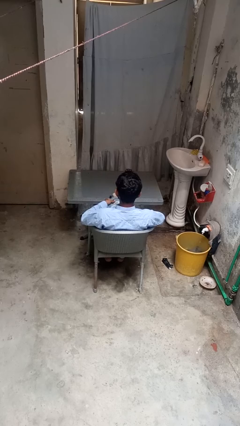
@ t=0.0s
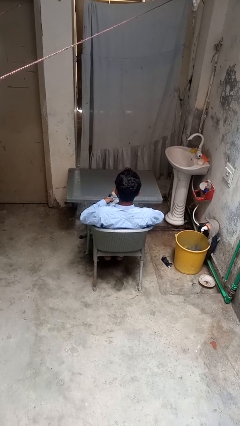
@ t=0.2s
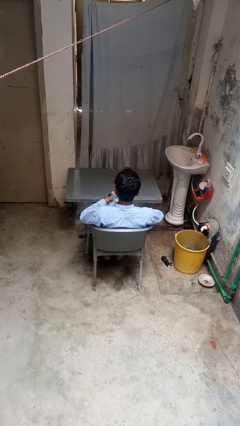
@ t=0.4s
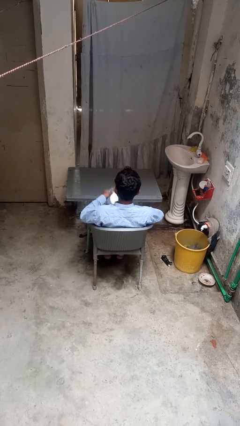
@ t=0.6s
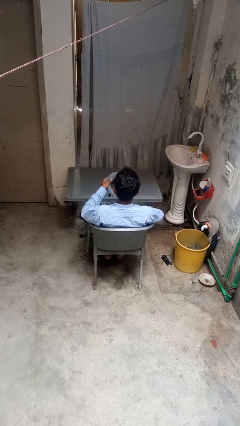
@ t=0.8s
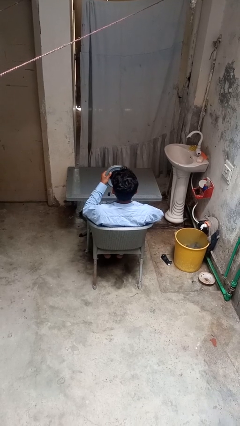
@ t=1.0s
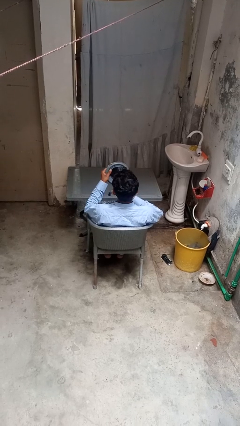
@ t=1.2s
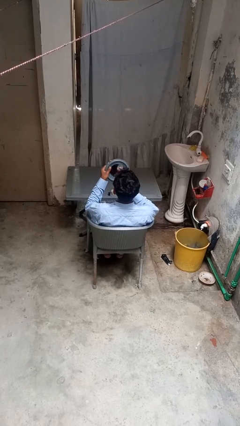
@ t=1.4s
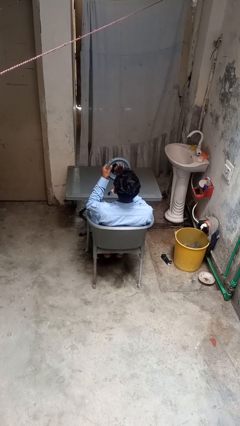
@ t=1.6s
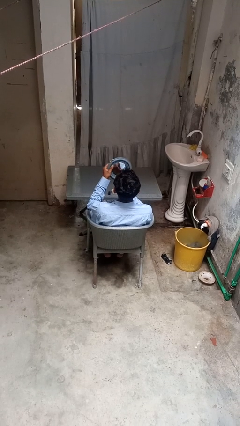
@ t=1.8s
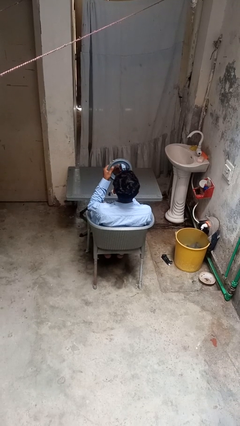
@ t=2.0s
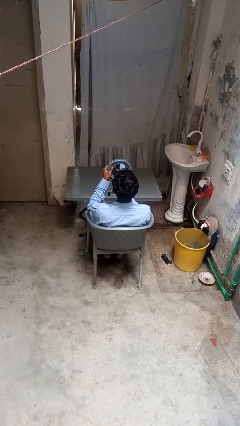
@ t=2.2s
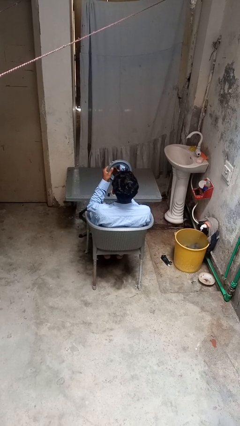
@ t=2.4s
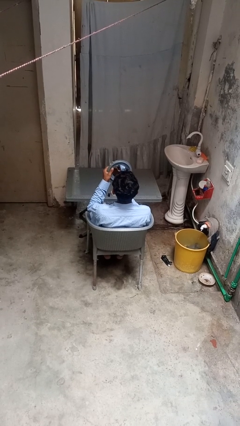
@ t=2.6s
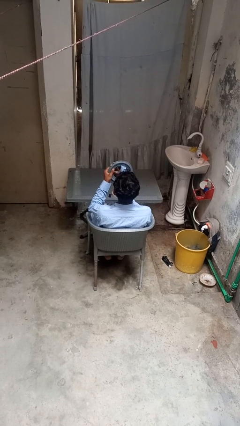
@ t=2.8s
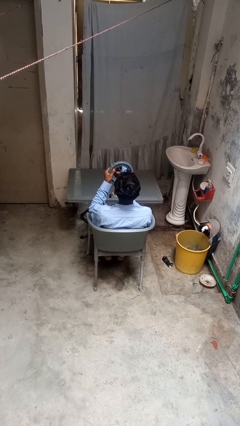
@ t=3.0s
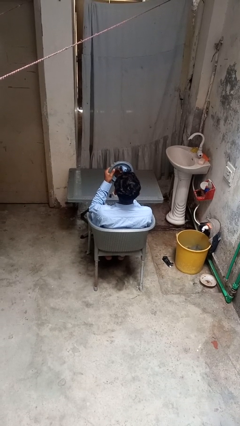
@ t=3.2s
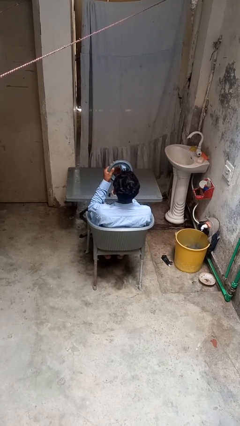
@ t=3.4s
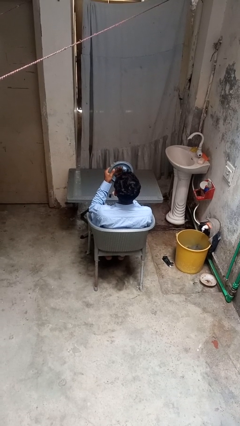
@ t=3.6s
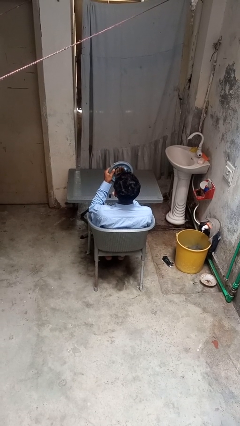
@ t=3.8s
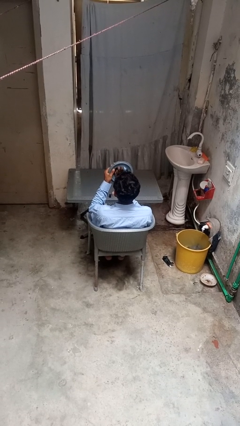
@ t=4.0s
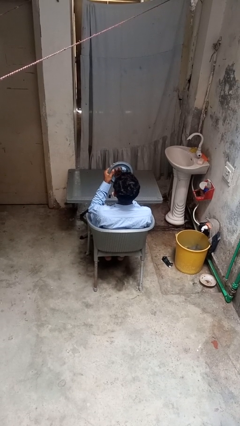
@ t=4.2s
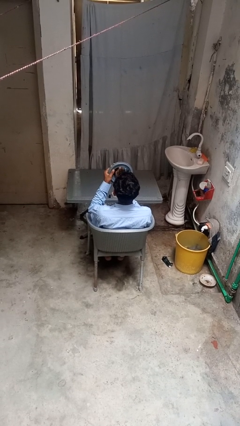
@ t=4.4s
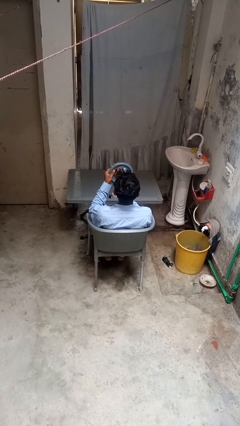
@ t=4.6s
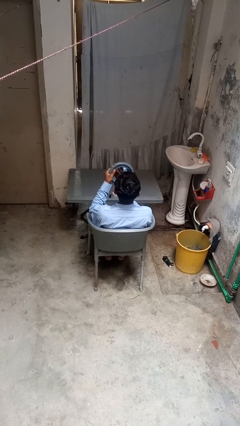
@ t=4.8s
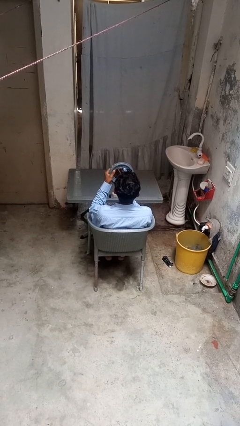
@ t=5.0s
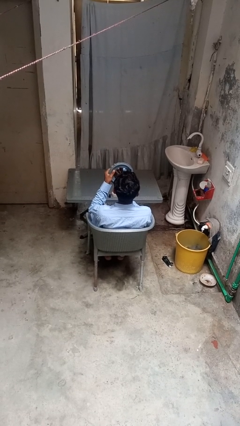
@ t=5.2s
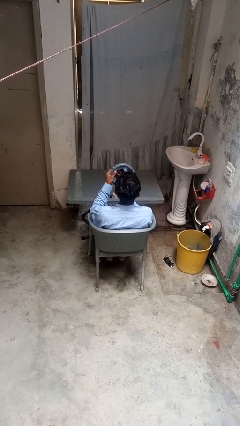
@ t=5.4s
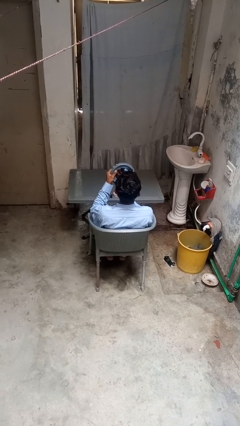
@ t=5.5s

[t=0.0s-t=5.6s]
person applies lip makeup

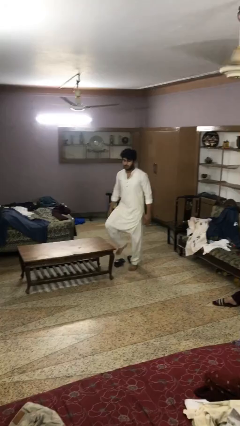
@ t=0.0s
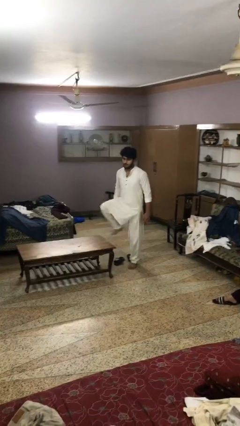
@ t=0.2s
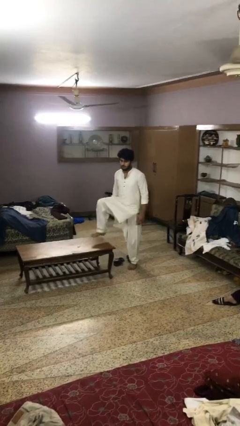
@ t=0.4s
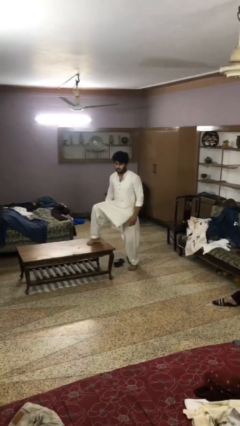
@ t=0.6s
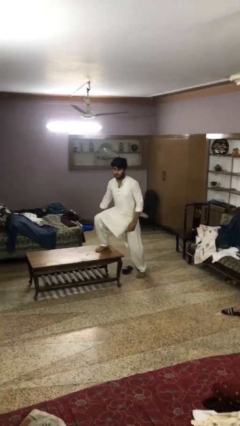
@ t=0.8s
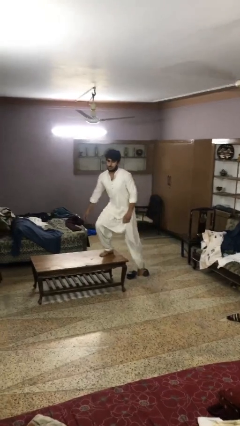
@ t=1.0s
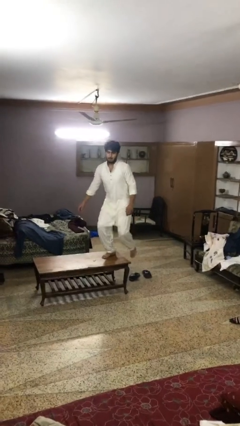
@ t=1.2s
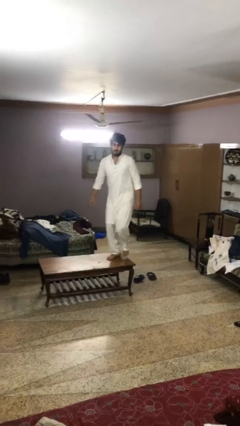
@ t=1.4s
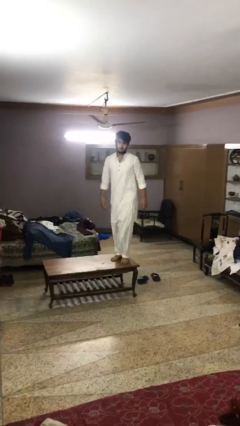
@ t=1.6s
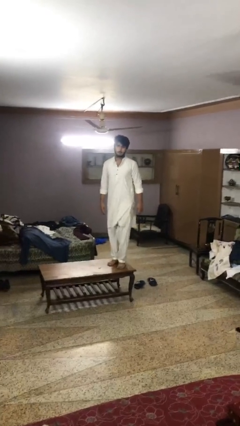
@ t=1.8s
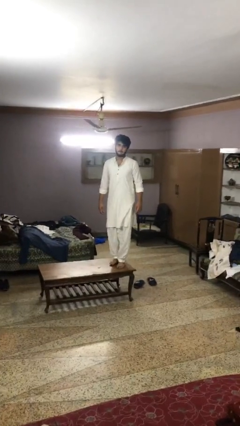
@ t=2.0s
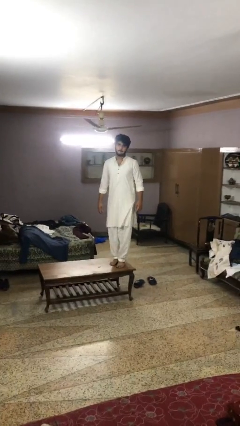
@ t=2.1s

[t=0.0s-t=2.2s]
person climbs on table

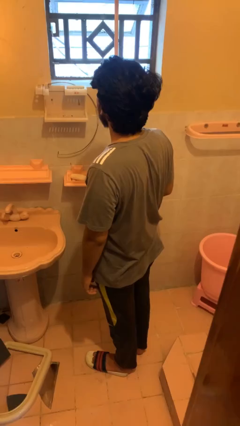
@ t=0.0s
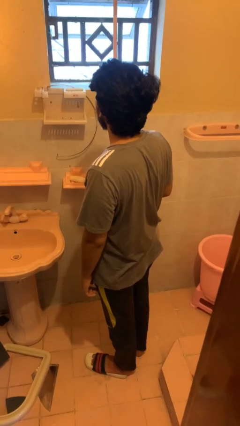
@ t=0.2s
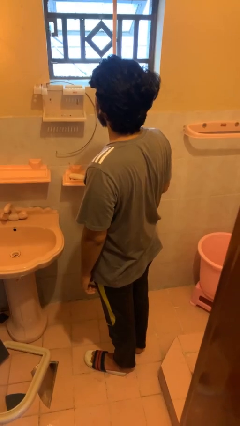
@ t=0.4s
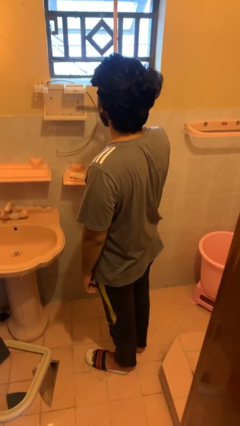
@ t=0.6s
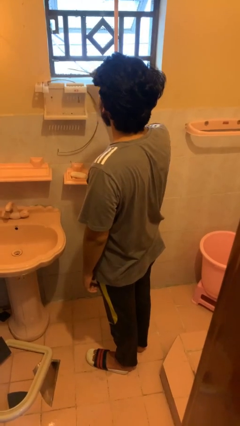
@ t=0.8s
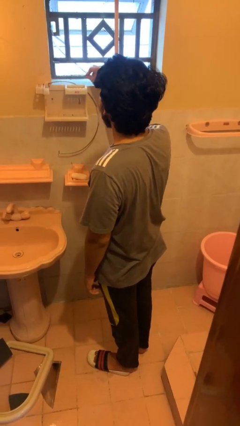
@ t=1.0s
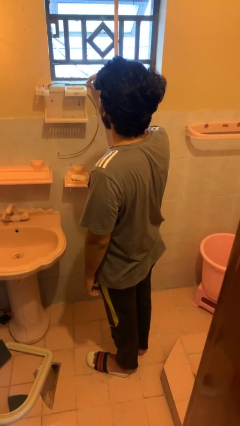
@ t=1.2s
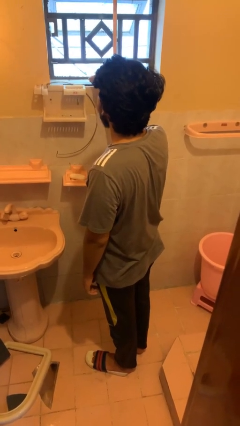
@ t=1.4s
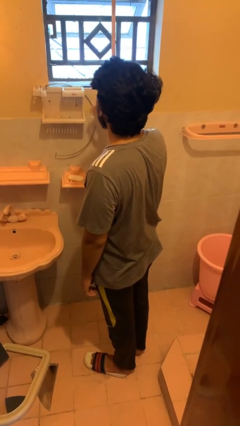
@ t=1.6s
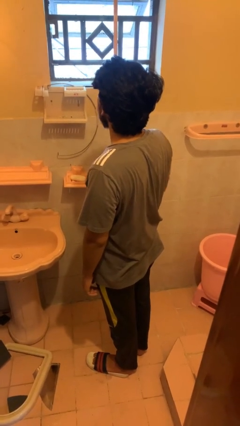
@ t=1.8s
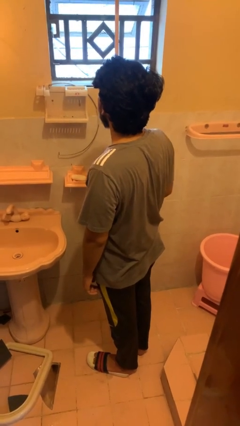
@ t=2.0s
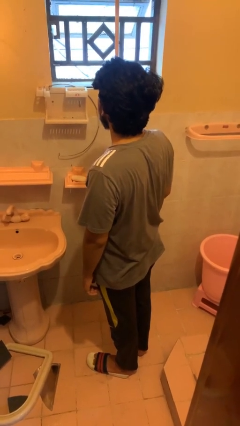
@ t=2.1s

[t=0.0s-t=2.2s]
person puts down object on countertop

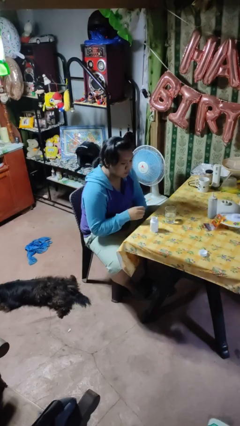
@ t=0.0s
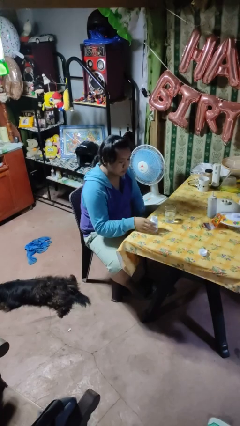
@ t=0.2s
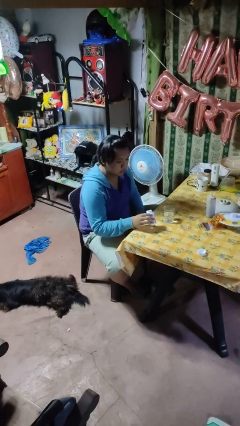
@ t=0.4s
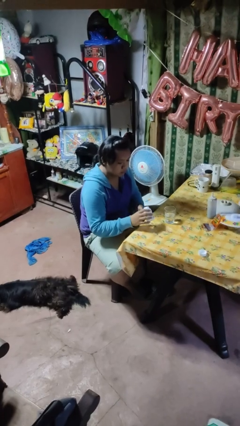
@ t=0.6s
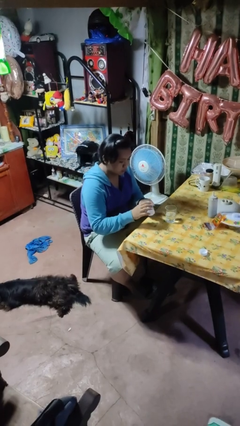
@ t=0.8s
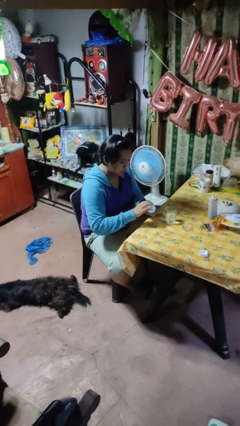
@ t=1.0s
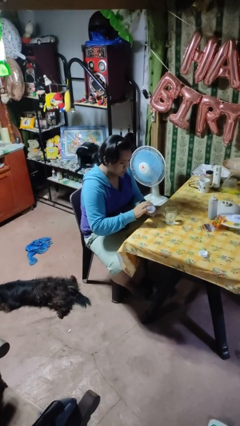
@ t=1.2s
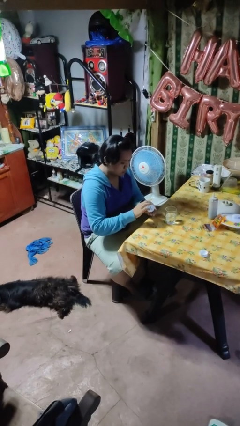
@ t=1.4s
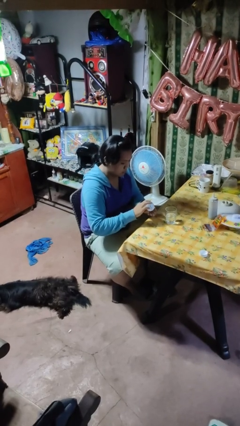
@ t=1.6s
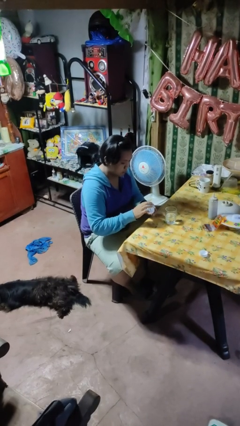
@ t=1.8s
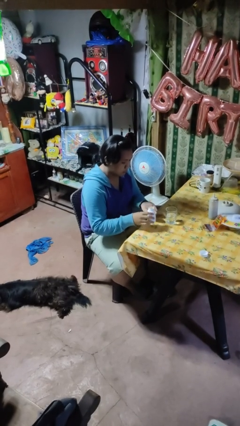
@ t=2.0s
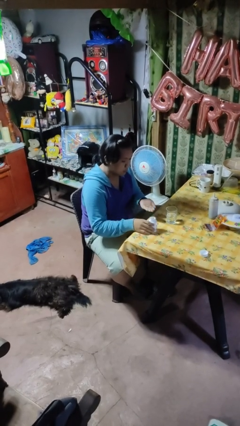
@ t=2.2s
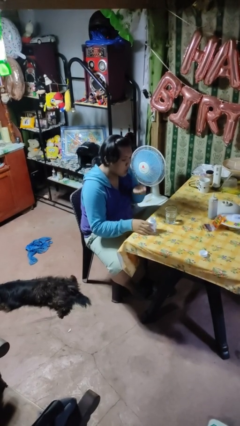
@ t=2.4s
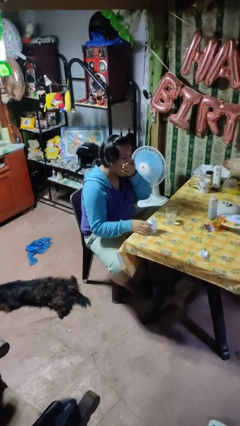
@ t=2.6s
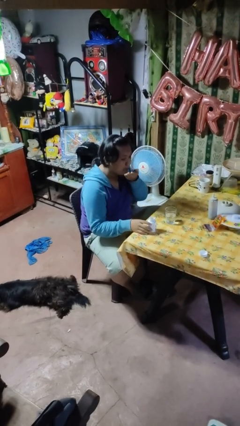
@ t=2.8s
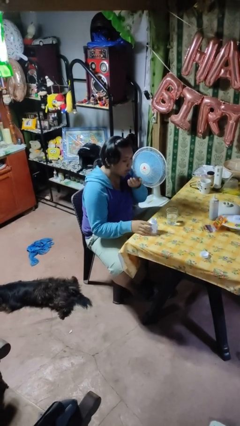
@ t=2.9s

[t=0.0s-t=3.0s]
person takes medicine pills

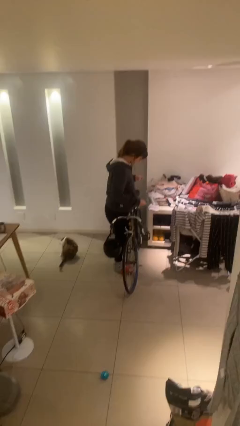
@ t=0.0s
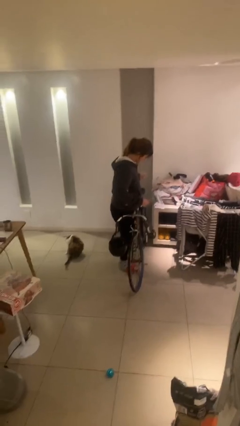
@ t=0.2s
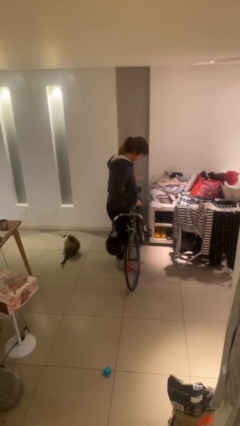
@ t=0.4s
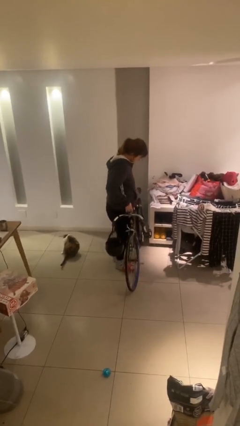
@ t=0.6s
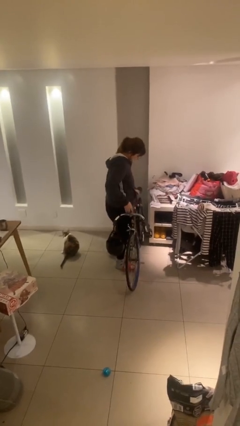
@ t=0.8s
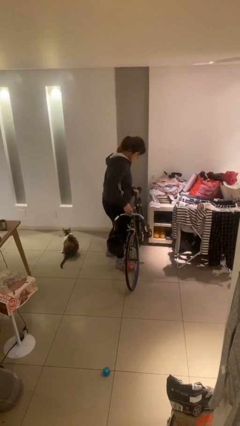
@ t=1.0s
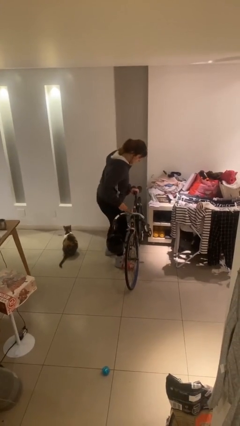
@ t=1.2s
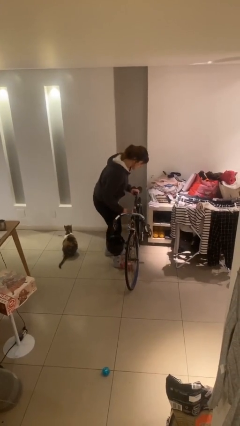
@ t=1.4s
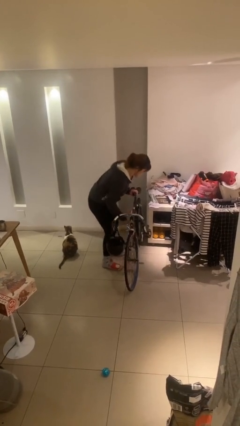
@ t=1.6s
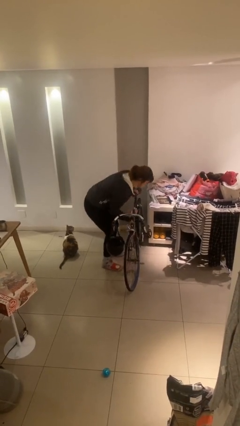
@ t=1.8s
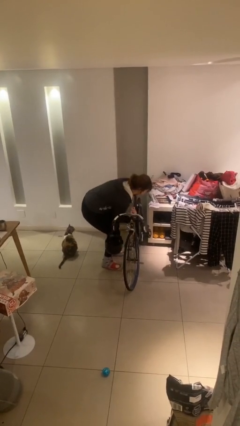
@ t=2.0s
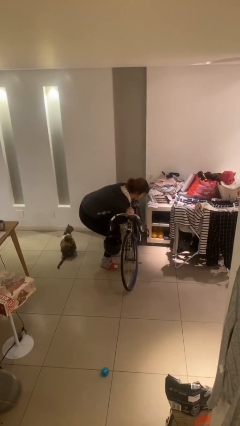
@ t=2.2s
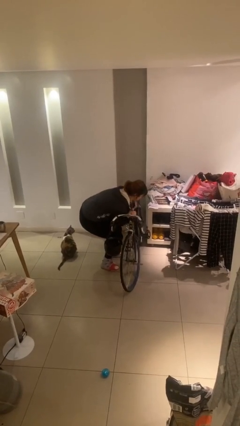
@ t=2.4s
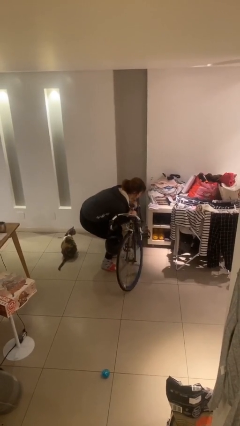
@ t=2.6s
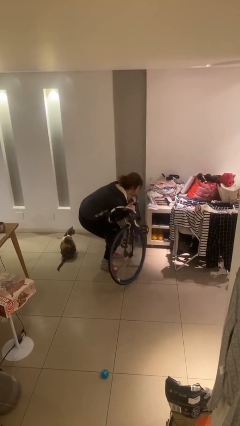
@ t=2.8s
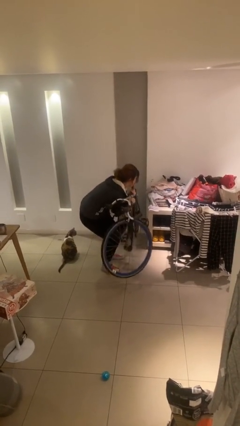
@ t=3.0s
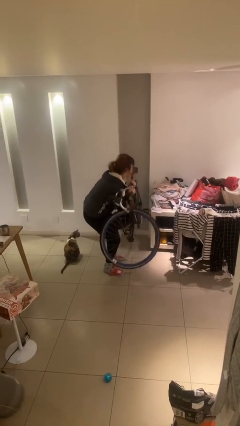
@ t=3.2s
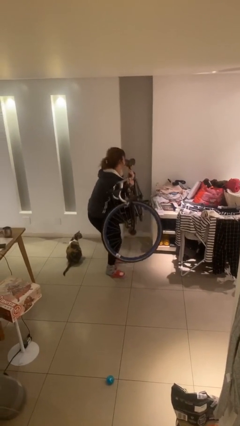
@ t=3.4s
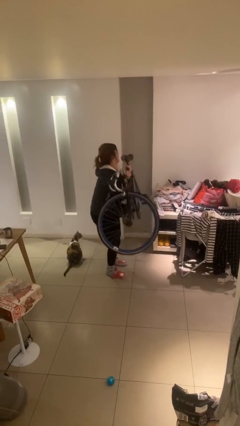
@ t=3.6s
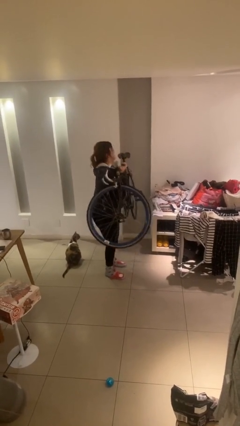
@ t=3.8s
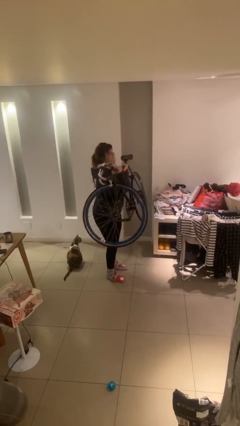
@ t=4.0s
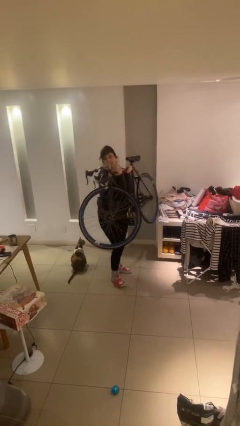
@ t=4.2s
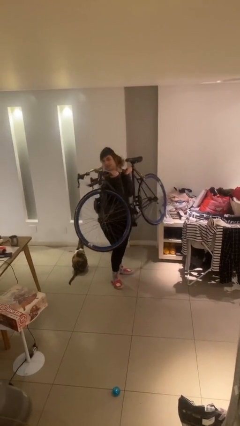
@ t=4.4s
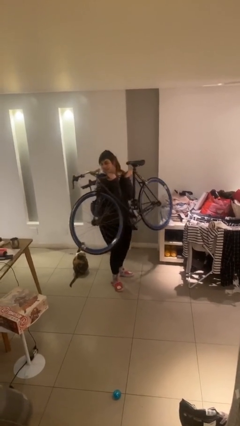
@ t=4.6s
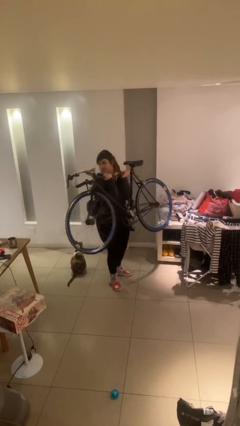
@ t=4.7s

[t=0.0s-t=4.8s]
person picks up object from floor
